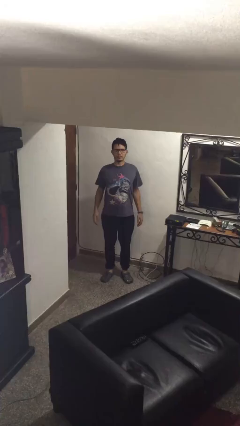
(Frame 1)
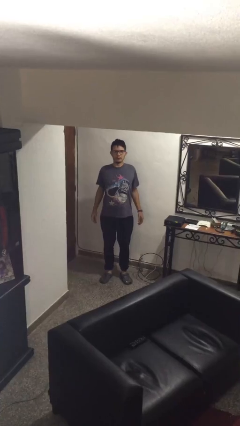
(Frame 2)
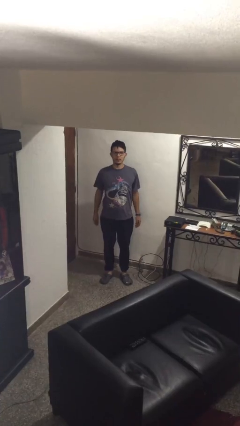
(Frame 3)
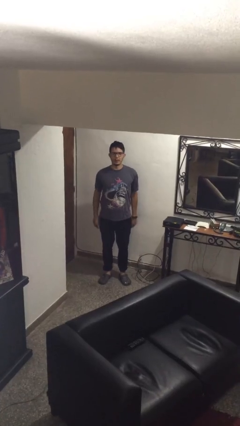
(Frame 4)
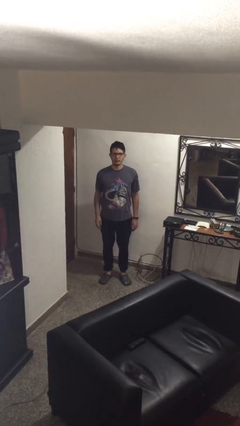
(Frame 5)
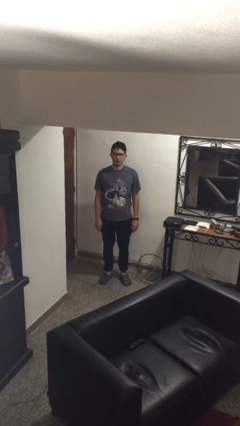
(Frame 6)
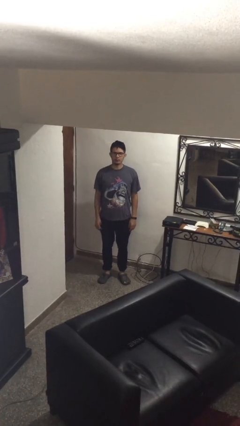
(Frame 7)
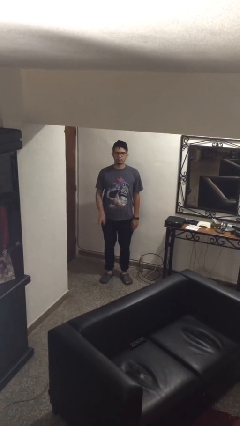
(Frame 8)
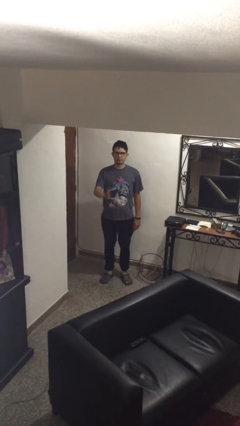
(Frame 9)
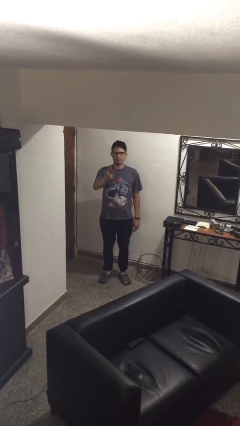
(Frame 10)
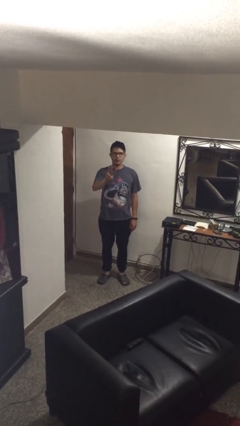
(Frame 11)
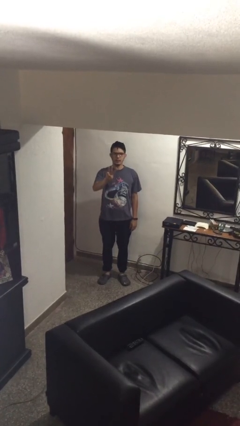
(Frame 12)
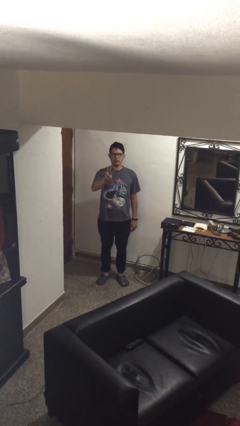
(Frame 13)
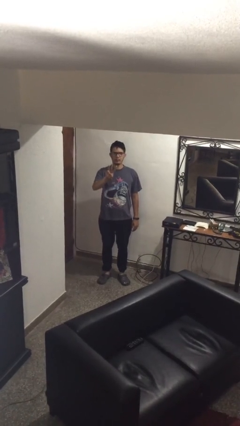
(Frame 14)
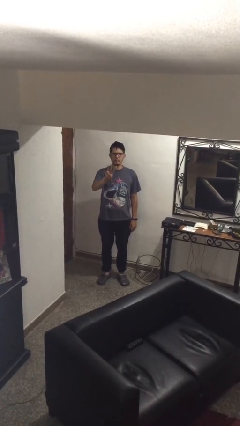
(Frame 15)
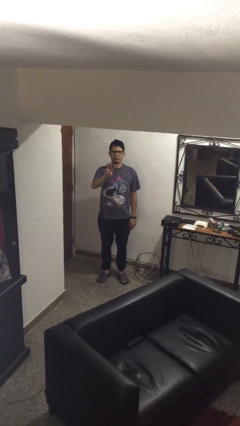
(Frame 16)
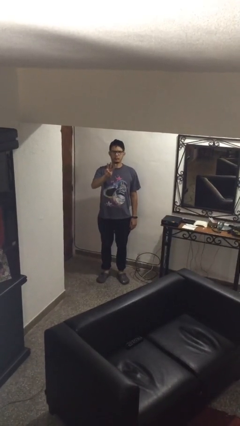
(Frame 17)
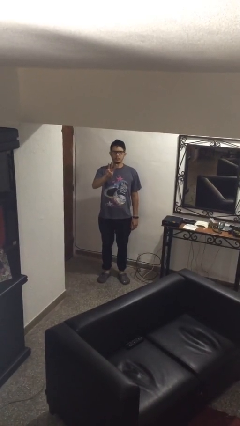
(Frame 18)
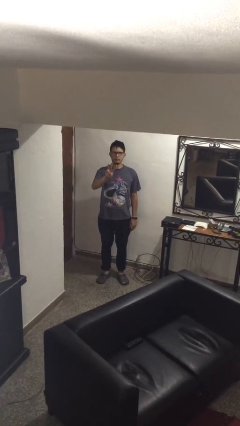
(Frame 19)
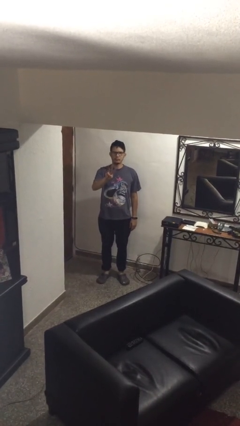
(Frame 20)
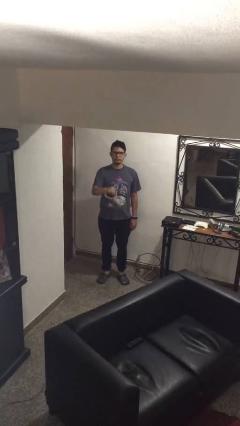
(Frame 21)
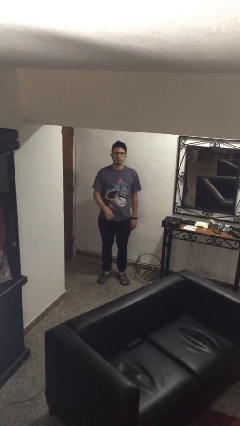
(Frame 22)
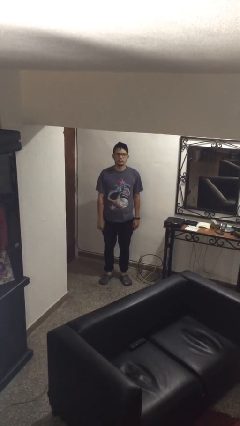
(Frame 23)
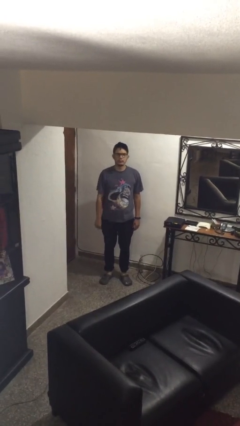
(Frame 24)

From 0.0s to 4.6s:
person gestures number three

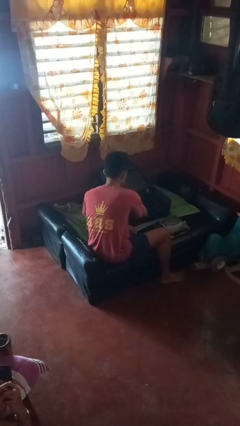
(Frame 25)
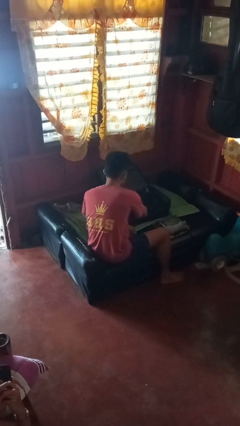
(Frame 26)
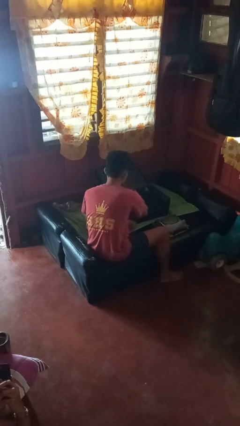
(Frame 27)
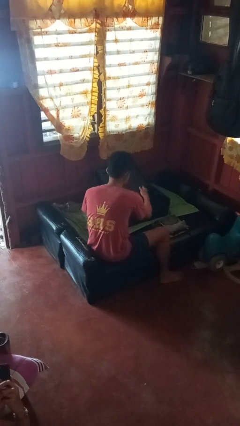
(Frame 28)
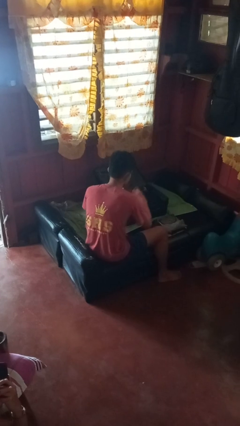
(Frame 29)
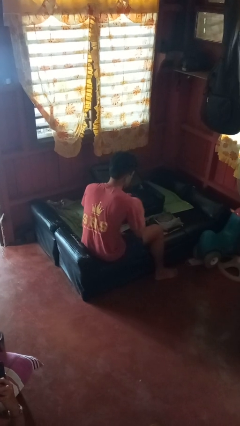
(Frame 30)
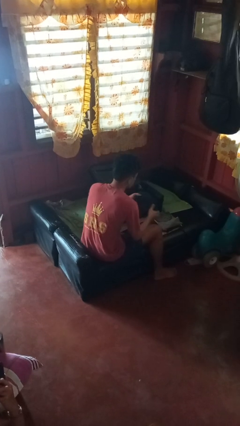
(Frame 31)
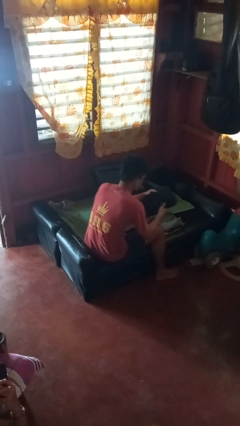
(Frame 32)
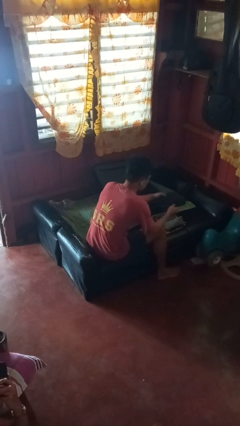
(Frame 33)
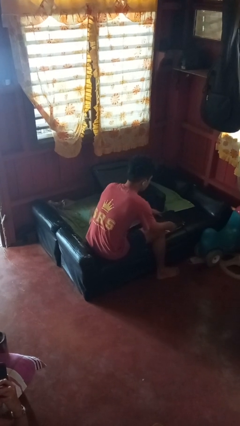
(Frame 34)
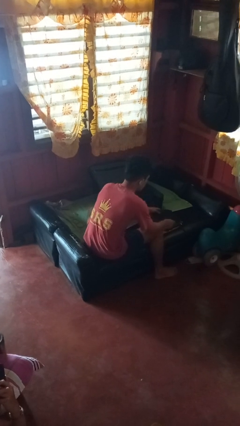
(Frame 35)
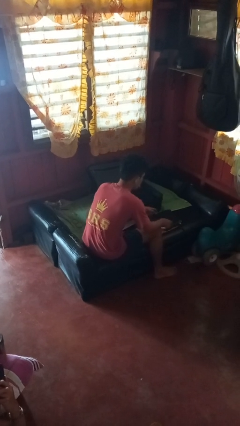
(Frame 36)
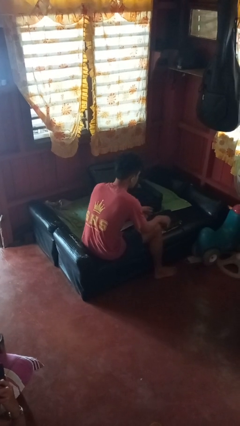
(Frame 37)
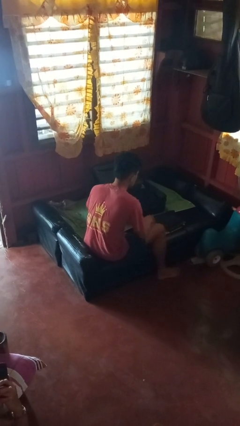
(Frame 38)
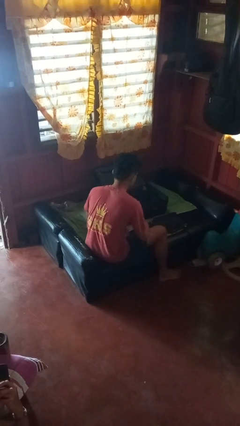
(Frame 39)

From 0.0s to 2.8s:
person unloads clothes from suitcase

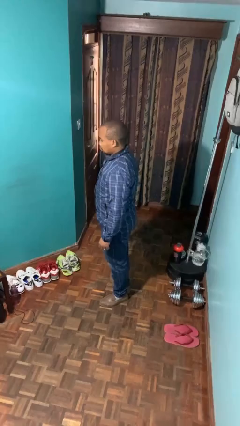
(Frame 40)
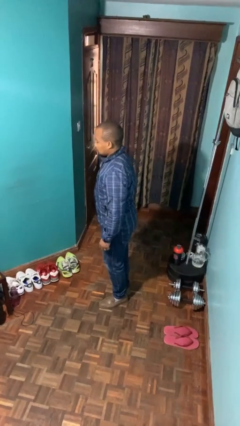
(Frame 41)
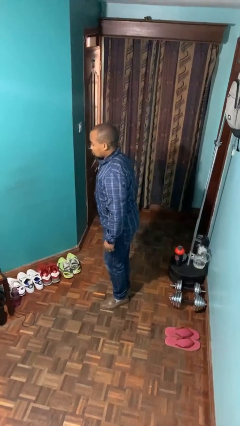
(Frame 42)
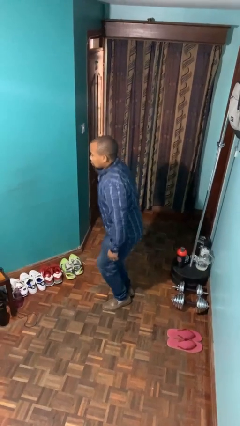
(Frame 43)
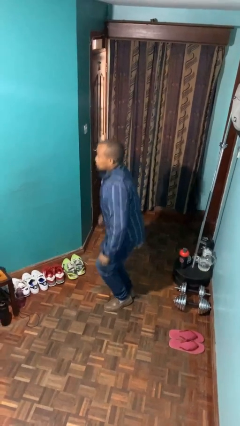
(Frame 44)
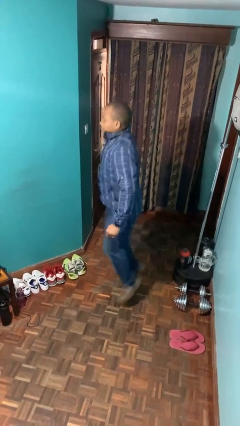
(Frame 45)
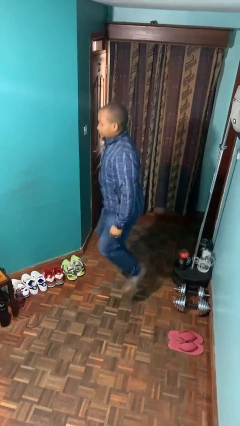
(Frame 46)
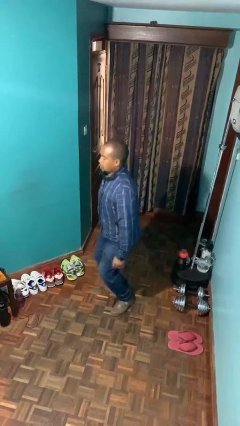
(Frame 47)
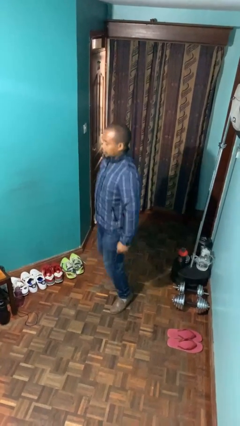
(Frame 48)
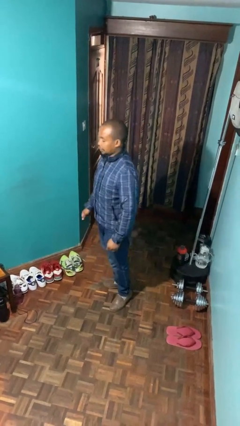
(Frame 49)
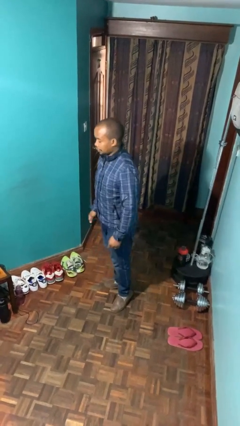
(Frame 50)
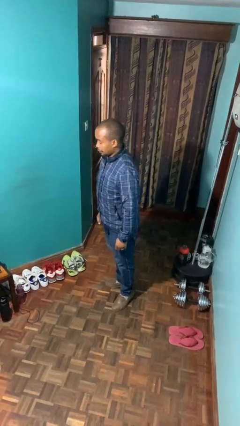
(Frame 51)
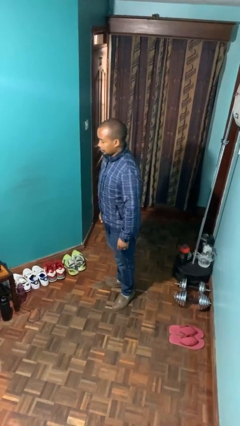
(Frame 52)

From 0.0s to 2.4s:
person jumps

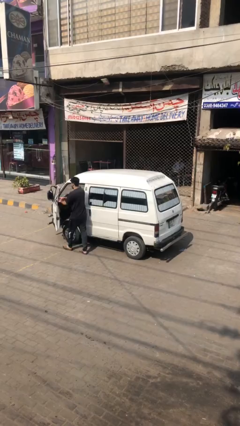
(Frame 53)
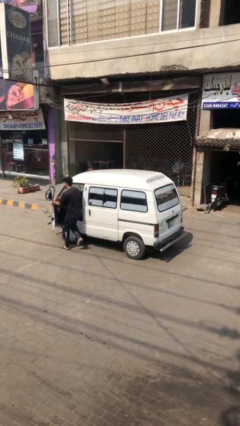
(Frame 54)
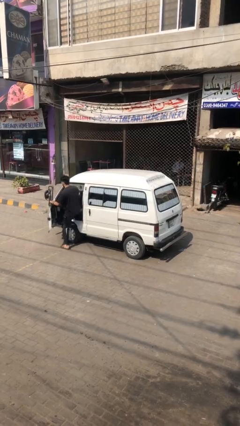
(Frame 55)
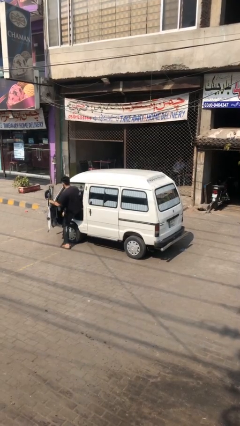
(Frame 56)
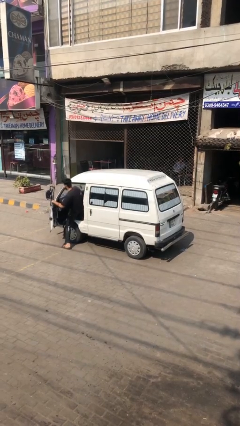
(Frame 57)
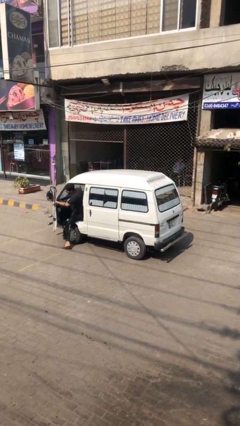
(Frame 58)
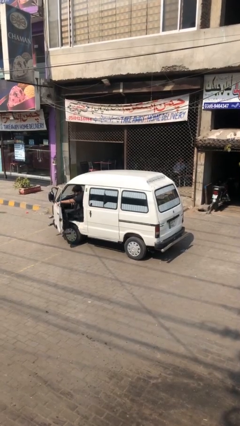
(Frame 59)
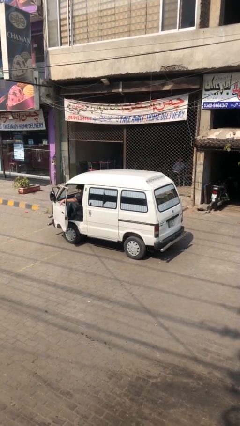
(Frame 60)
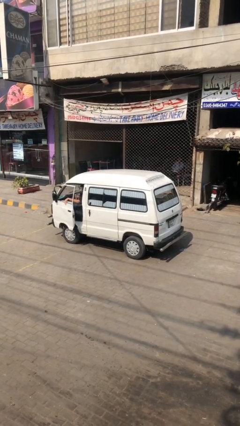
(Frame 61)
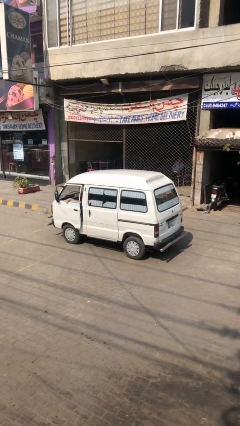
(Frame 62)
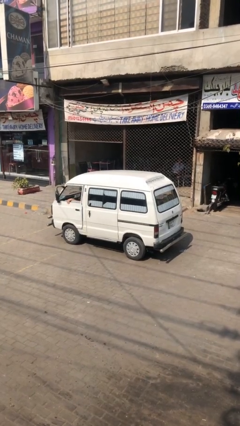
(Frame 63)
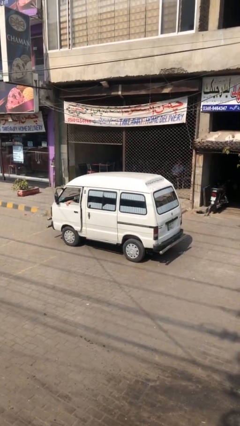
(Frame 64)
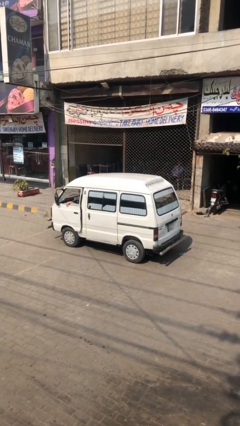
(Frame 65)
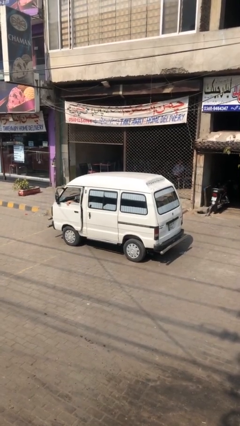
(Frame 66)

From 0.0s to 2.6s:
car picks up person

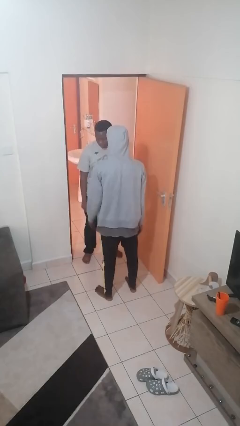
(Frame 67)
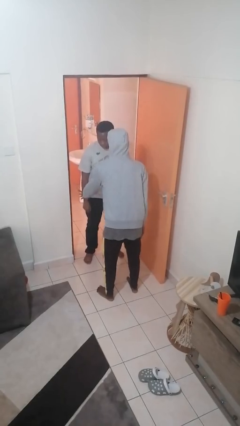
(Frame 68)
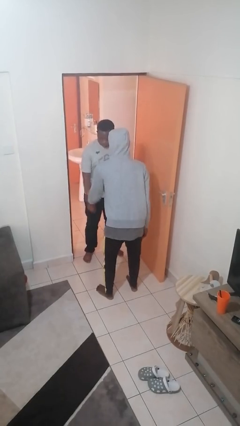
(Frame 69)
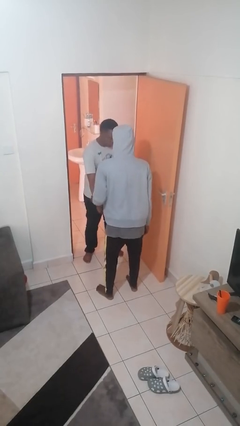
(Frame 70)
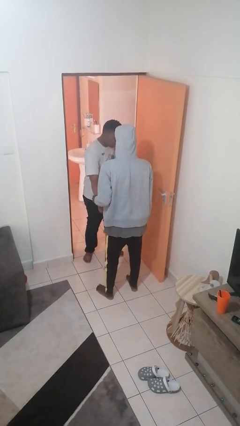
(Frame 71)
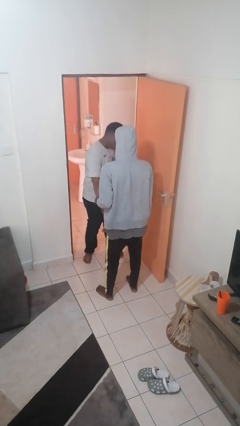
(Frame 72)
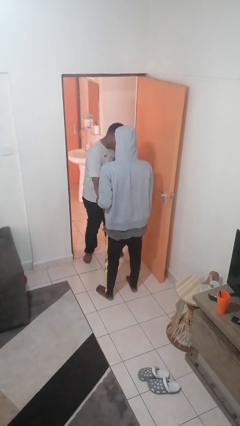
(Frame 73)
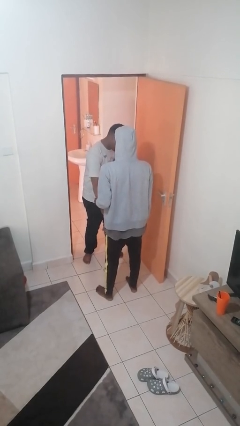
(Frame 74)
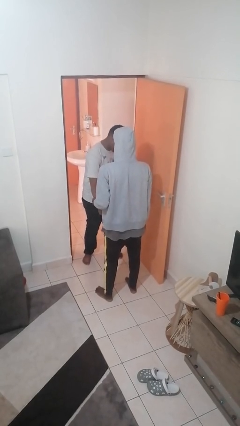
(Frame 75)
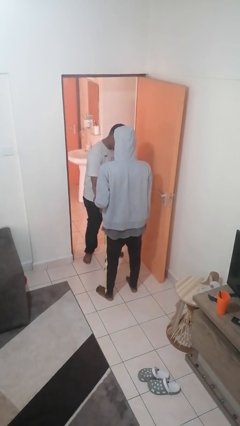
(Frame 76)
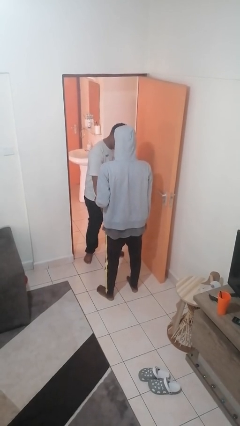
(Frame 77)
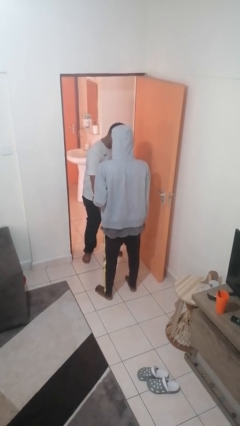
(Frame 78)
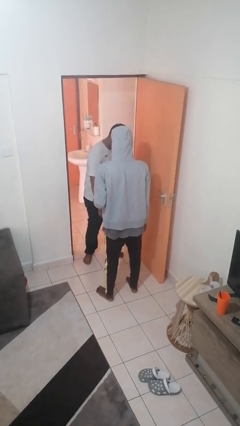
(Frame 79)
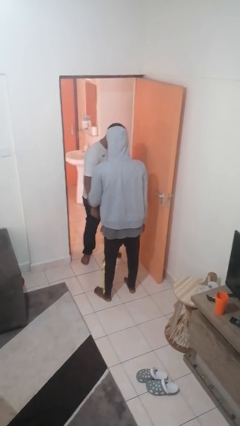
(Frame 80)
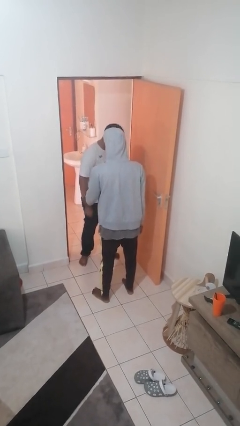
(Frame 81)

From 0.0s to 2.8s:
person grabs person by forearm

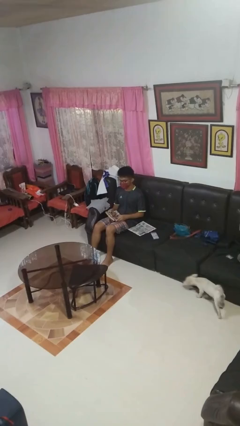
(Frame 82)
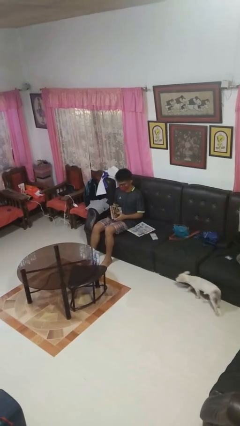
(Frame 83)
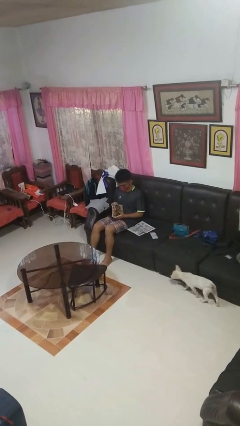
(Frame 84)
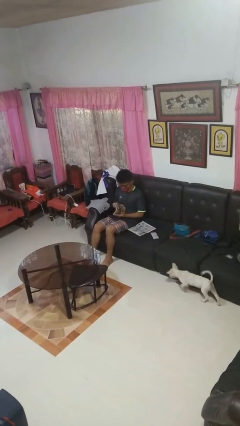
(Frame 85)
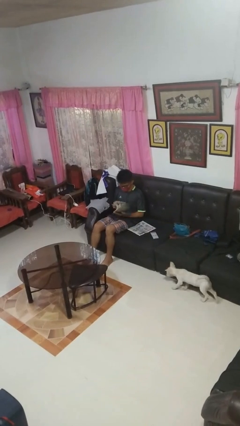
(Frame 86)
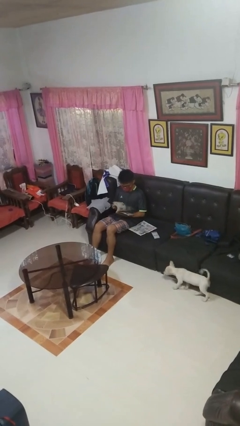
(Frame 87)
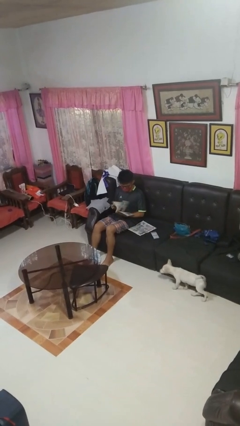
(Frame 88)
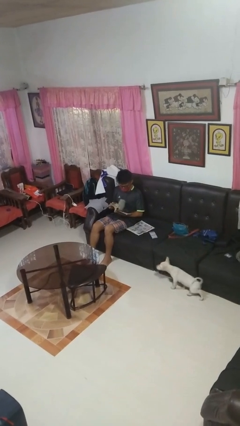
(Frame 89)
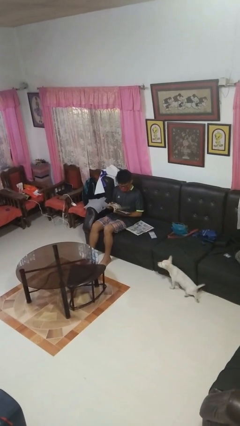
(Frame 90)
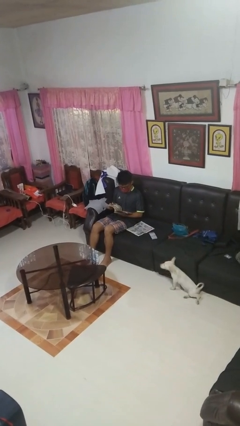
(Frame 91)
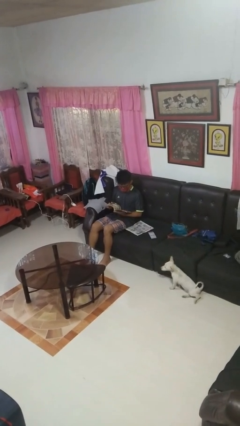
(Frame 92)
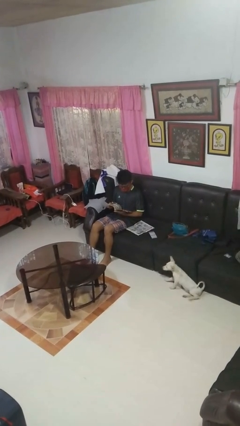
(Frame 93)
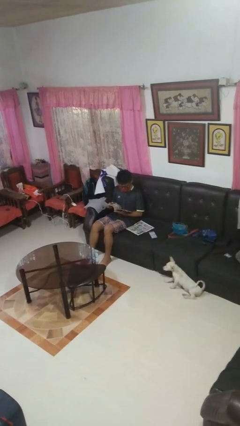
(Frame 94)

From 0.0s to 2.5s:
person reads magazine
